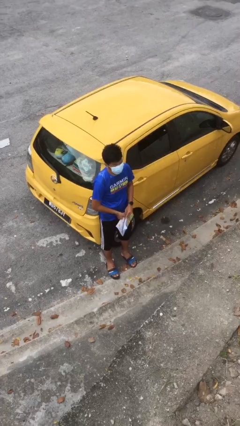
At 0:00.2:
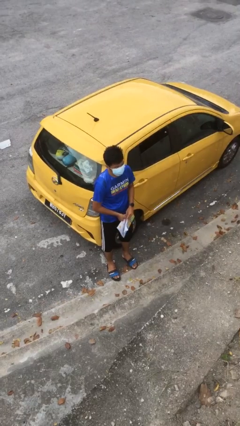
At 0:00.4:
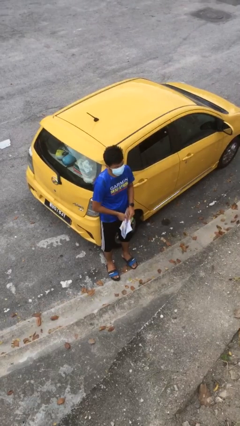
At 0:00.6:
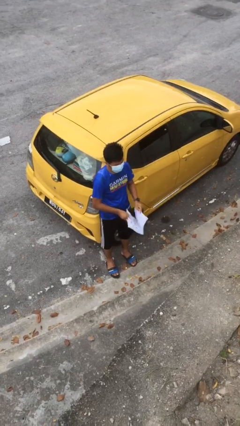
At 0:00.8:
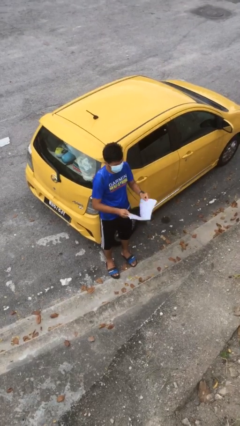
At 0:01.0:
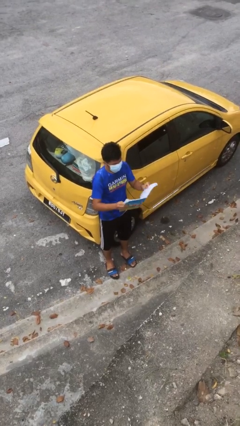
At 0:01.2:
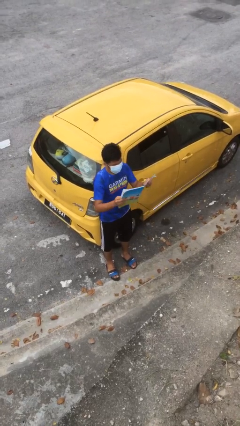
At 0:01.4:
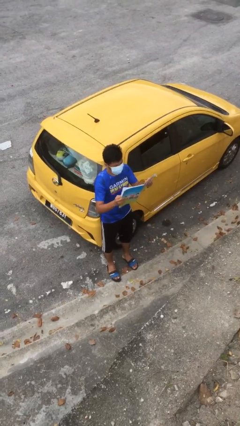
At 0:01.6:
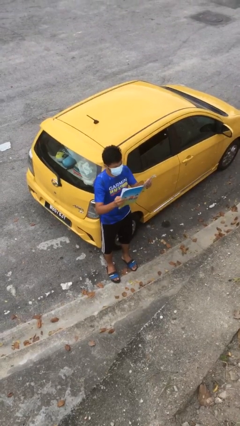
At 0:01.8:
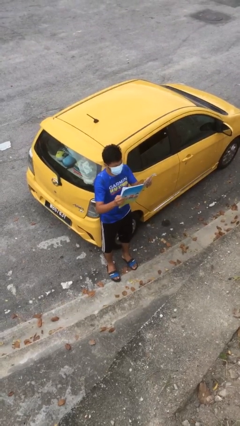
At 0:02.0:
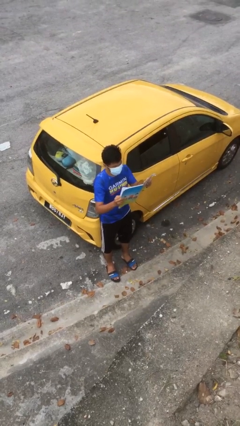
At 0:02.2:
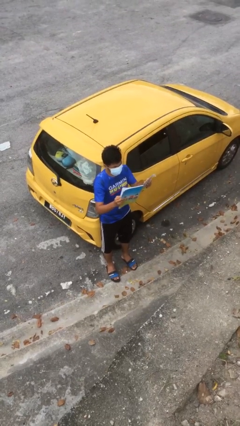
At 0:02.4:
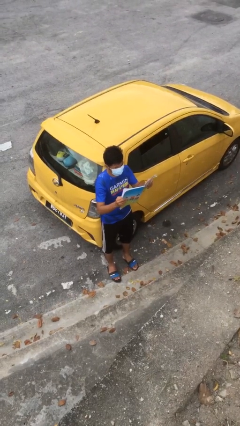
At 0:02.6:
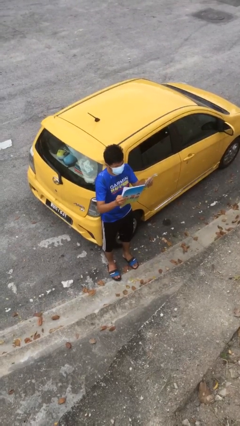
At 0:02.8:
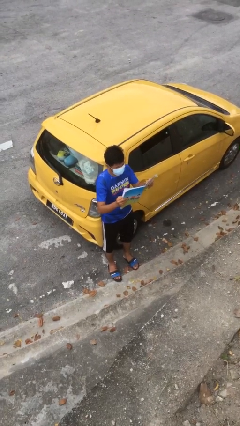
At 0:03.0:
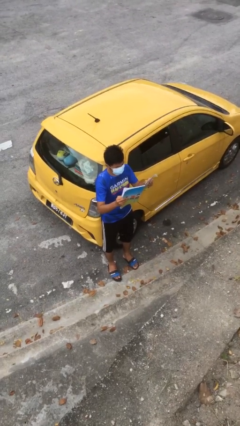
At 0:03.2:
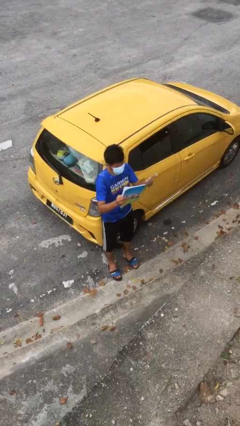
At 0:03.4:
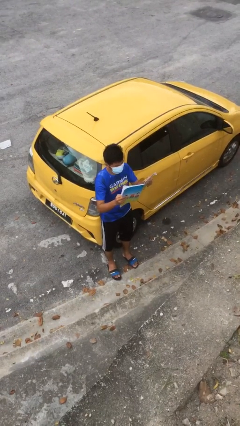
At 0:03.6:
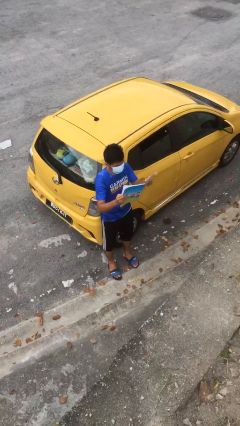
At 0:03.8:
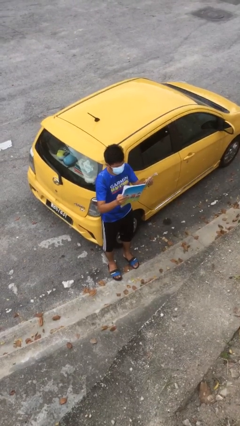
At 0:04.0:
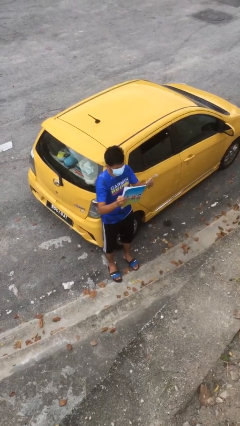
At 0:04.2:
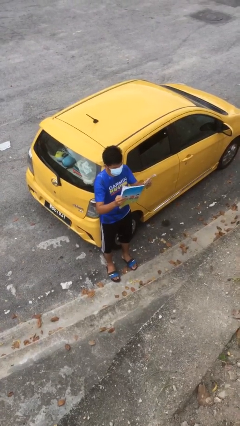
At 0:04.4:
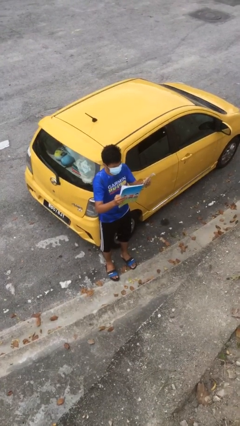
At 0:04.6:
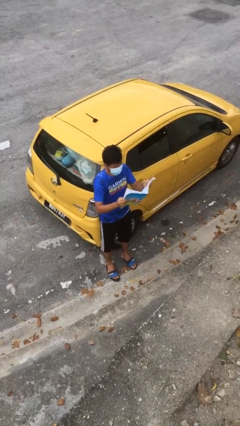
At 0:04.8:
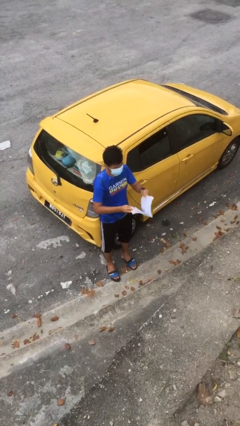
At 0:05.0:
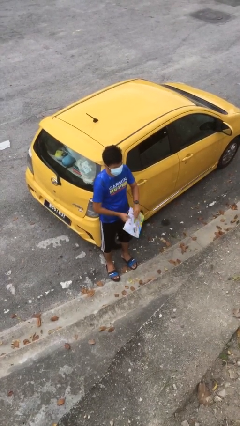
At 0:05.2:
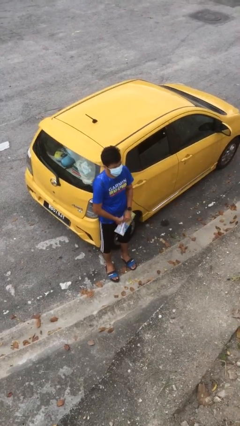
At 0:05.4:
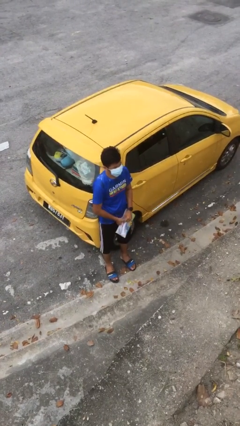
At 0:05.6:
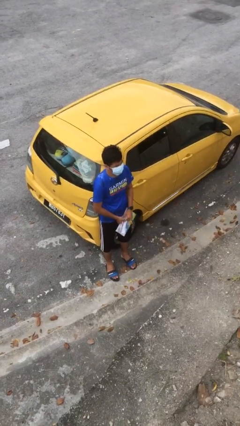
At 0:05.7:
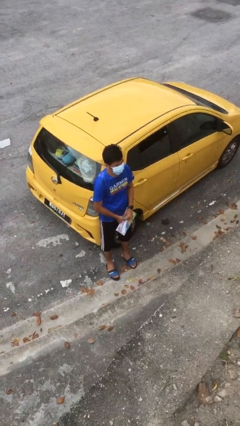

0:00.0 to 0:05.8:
person reads document

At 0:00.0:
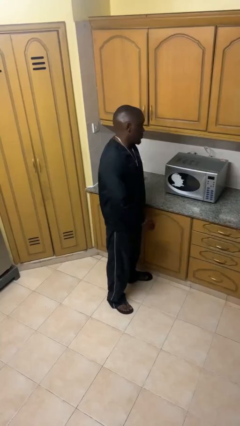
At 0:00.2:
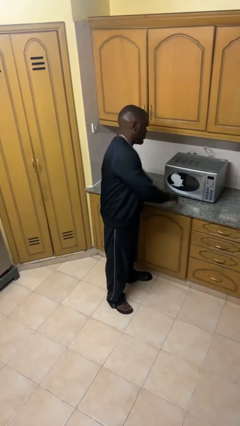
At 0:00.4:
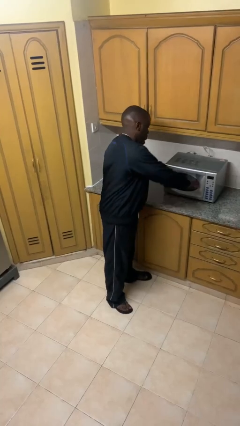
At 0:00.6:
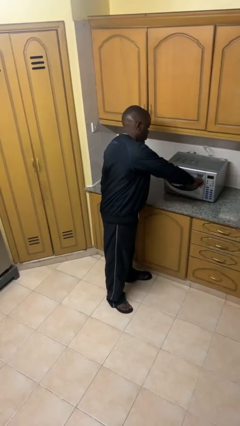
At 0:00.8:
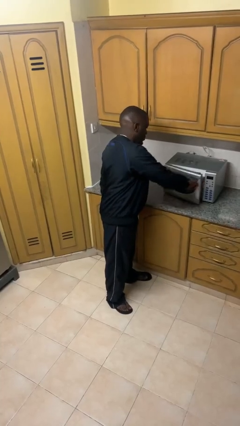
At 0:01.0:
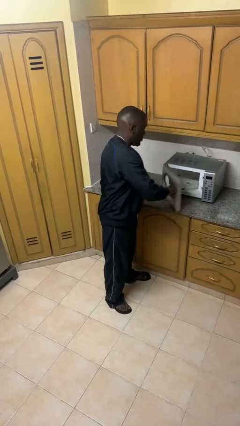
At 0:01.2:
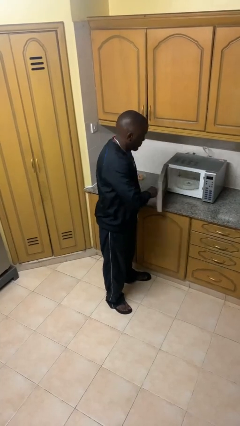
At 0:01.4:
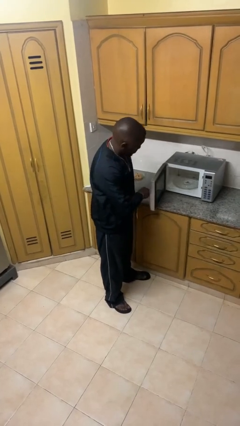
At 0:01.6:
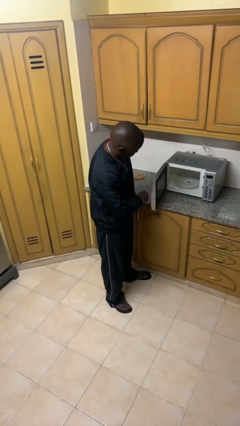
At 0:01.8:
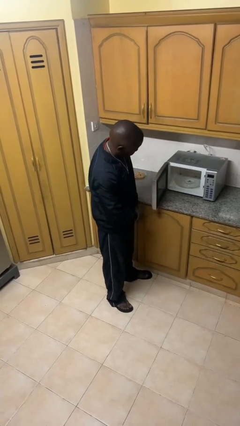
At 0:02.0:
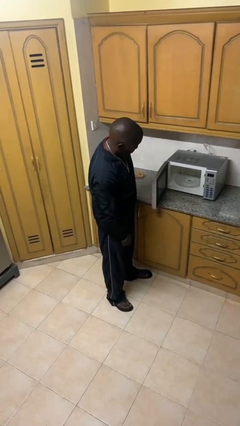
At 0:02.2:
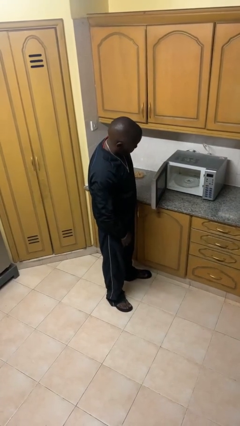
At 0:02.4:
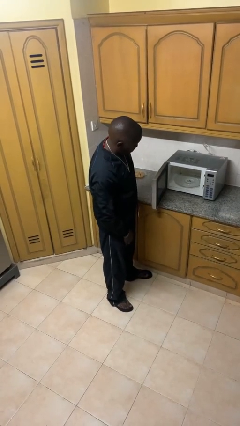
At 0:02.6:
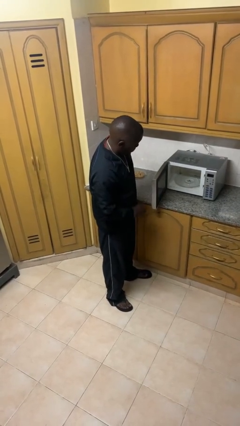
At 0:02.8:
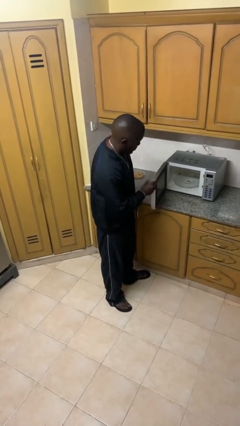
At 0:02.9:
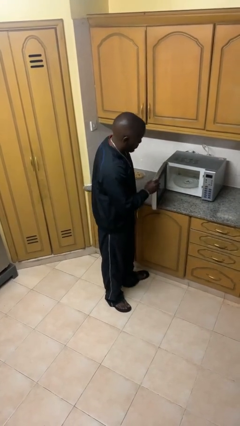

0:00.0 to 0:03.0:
person opens microwave

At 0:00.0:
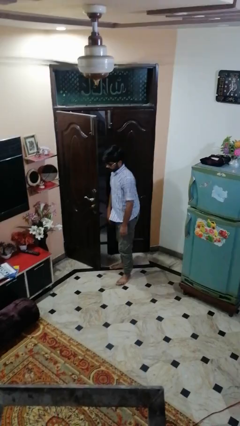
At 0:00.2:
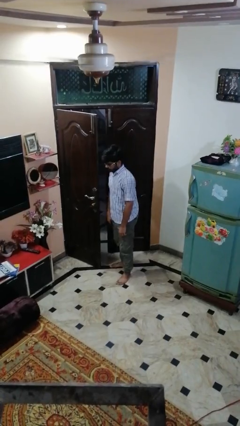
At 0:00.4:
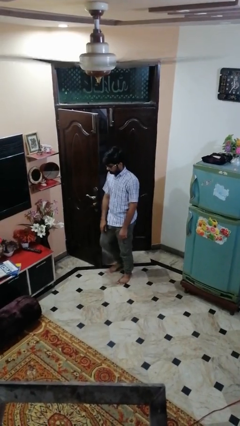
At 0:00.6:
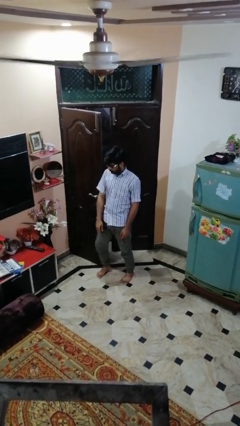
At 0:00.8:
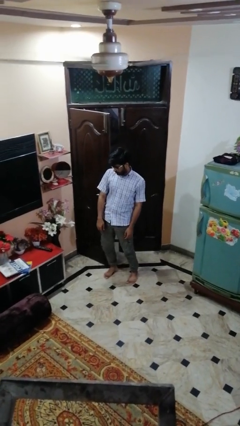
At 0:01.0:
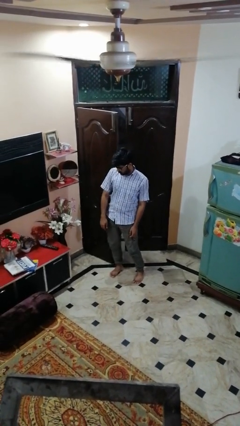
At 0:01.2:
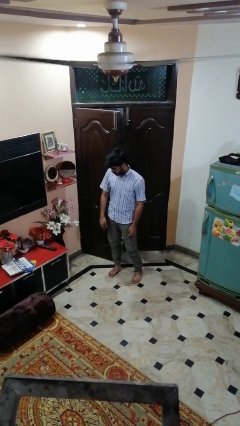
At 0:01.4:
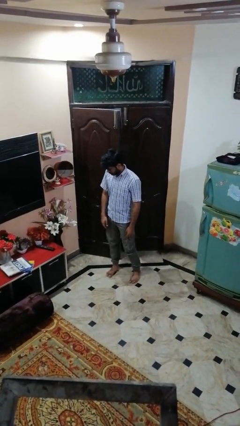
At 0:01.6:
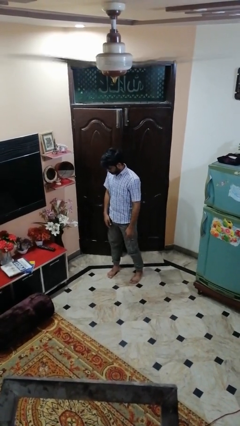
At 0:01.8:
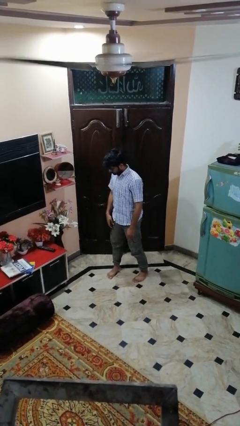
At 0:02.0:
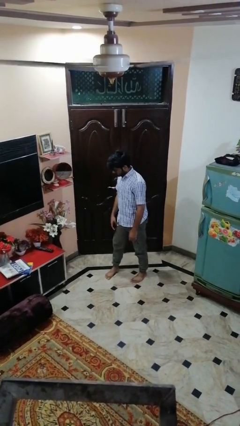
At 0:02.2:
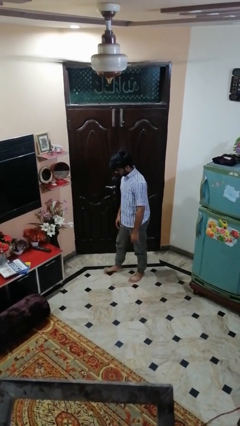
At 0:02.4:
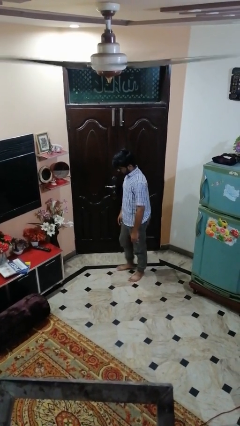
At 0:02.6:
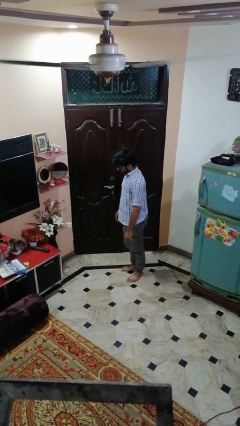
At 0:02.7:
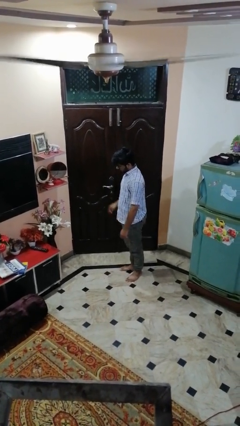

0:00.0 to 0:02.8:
person closes door with hip

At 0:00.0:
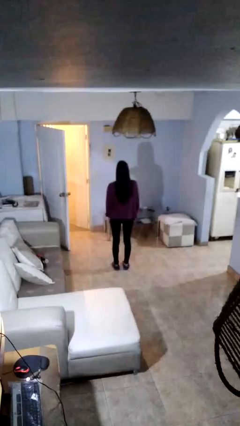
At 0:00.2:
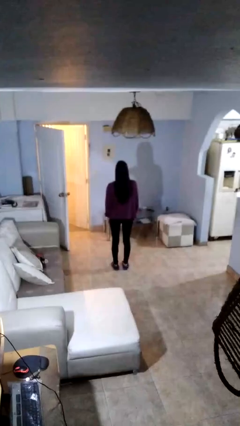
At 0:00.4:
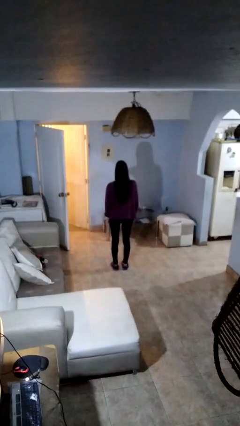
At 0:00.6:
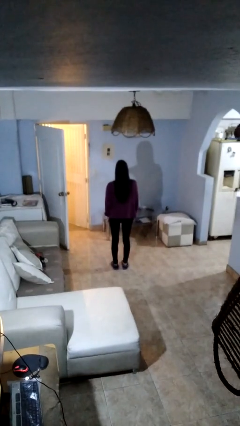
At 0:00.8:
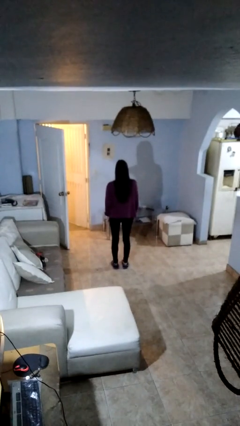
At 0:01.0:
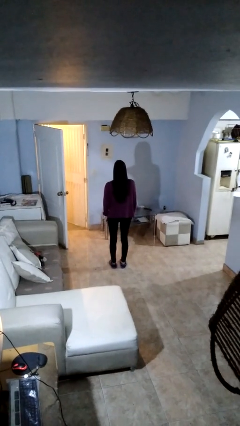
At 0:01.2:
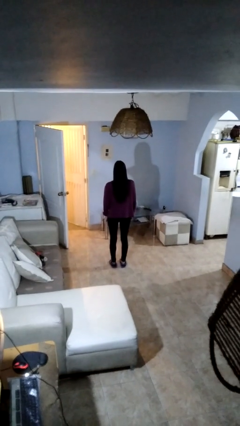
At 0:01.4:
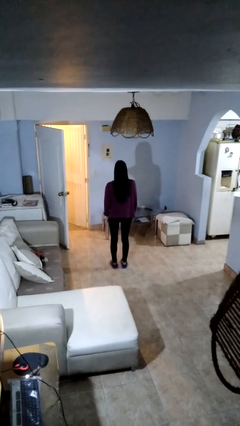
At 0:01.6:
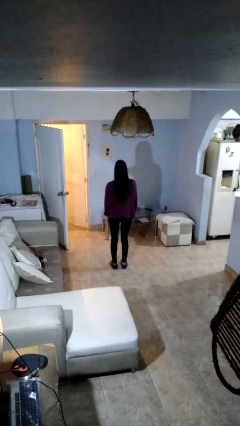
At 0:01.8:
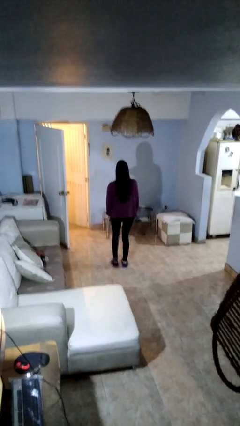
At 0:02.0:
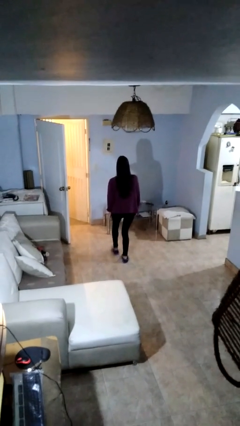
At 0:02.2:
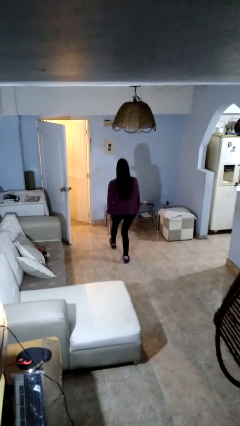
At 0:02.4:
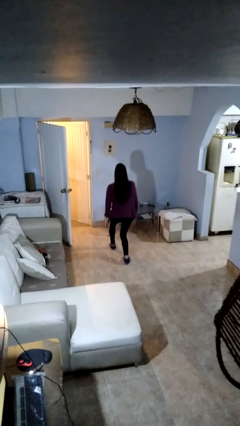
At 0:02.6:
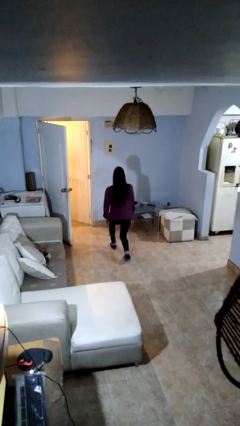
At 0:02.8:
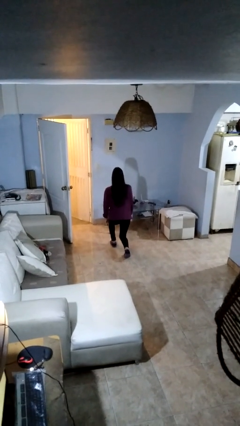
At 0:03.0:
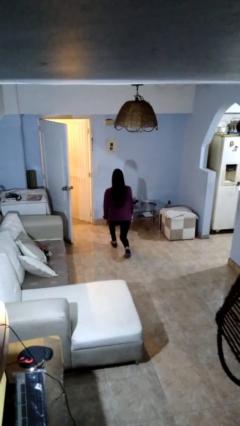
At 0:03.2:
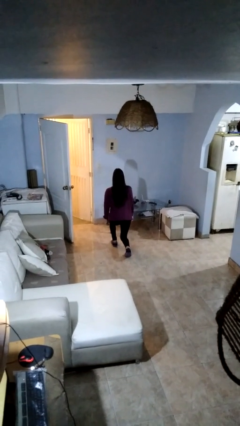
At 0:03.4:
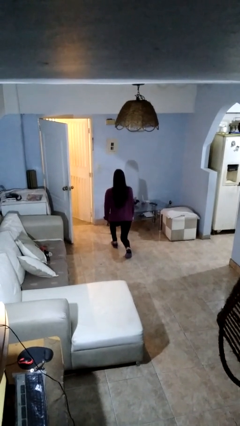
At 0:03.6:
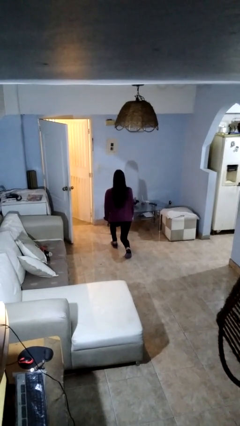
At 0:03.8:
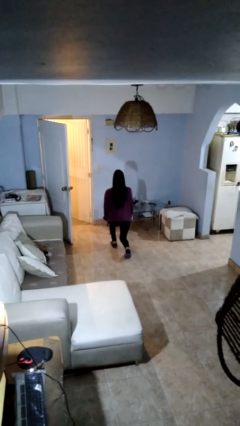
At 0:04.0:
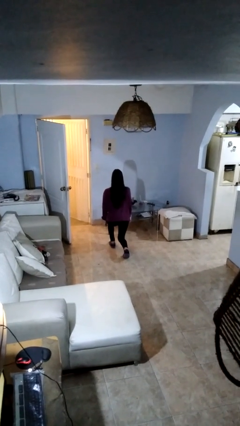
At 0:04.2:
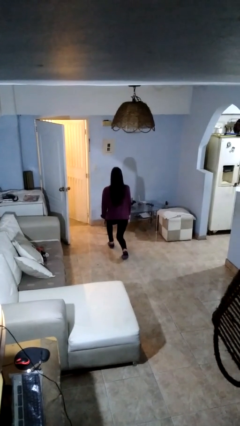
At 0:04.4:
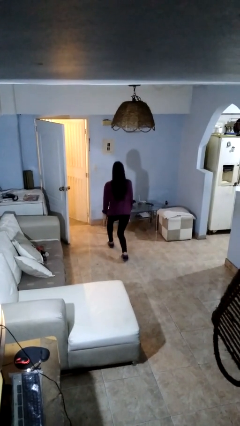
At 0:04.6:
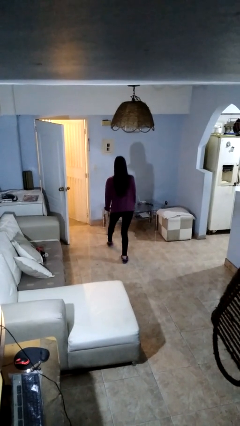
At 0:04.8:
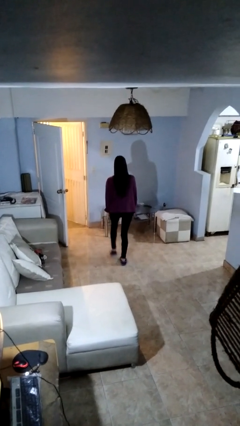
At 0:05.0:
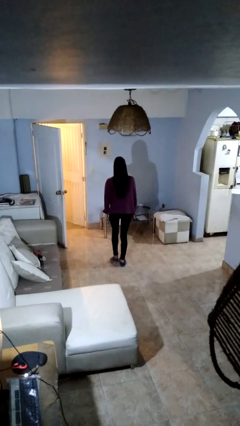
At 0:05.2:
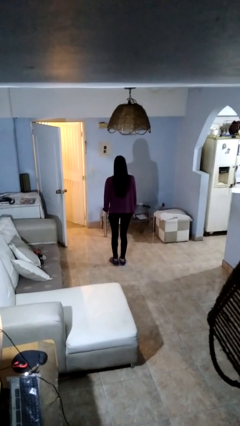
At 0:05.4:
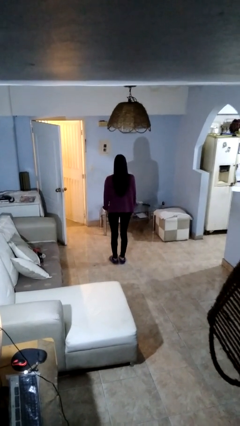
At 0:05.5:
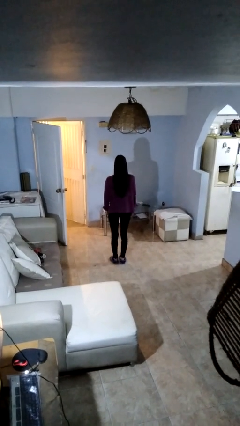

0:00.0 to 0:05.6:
person exercises with lunges
